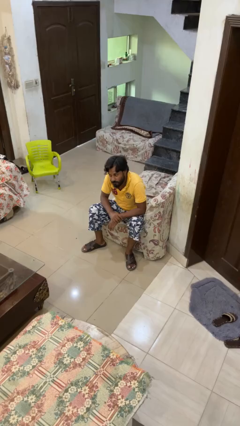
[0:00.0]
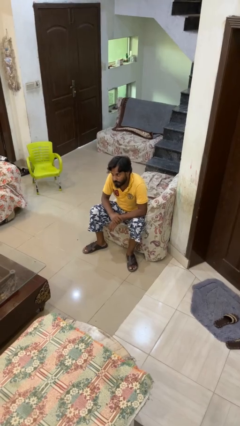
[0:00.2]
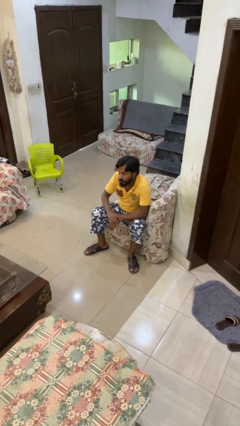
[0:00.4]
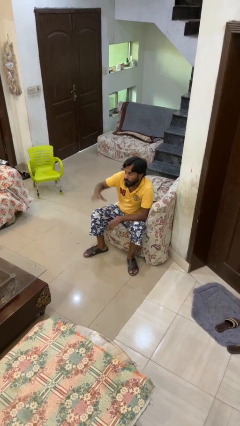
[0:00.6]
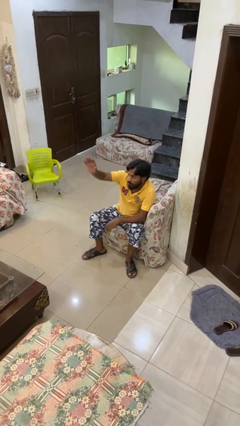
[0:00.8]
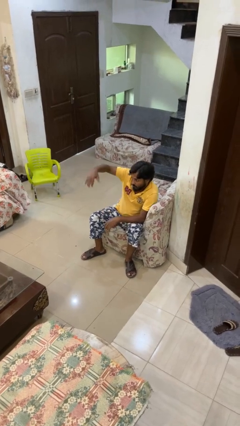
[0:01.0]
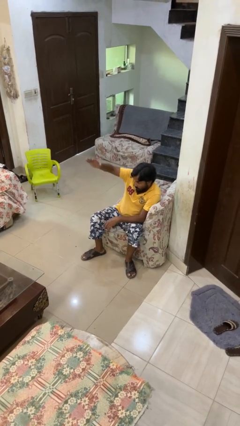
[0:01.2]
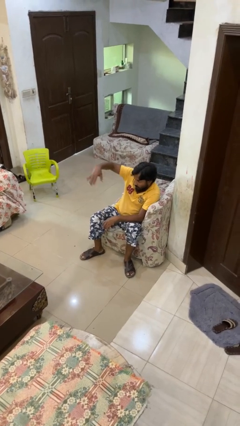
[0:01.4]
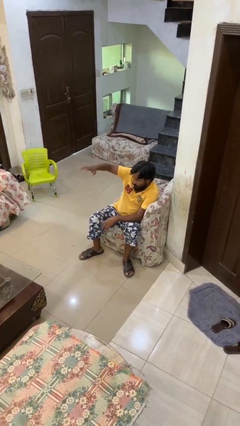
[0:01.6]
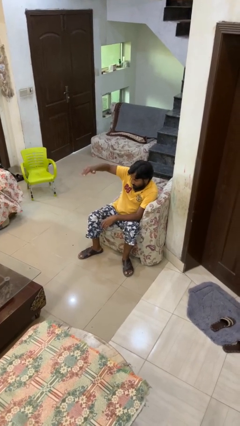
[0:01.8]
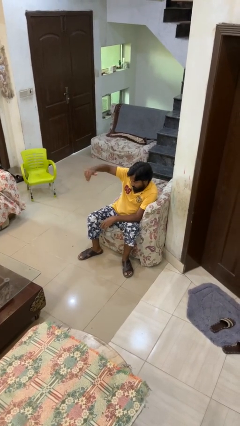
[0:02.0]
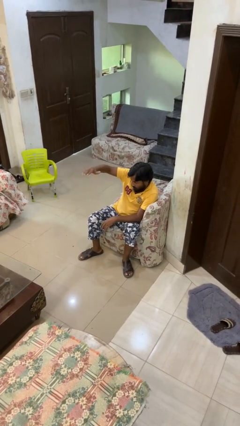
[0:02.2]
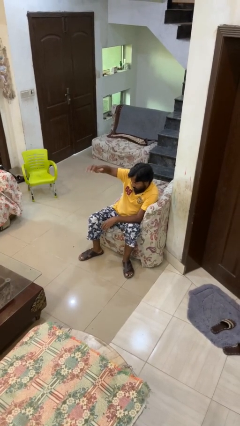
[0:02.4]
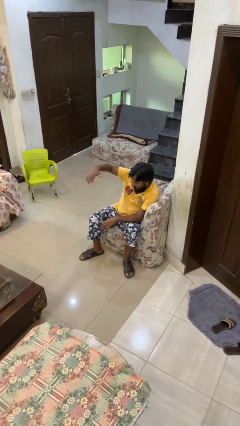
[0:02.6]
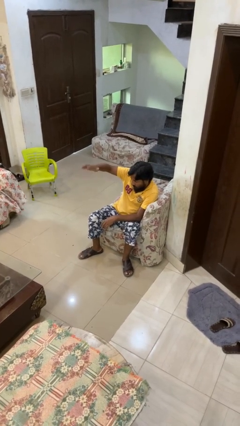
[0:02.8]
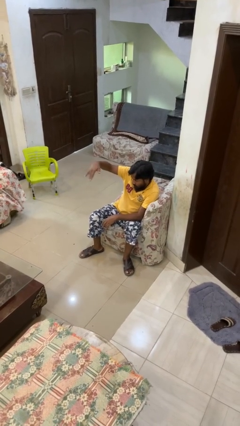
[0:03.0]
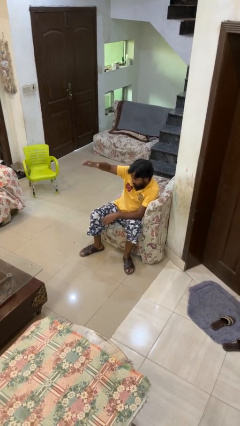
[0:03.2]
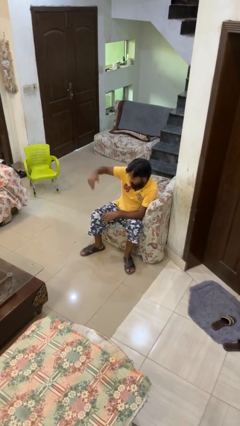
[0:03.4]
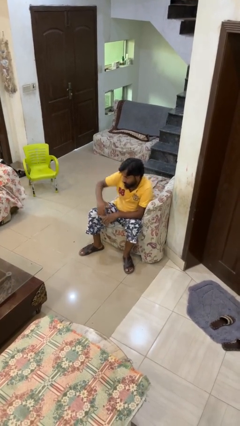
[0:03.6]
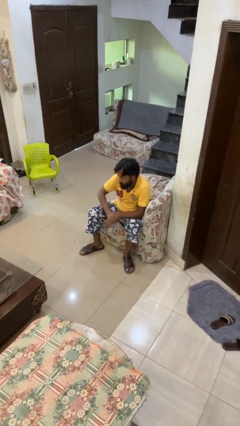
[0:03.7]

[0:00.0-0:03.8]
person gestures come here

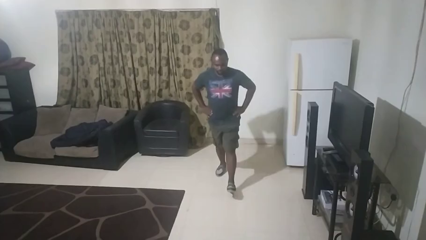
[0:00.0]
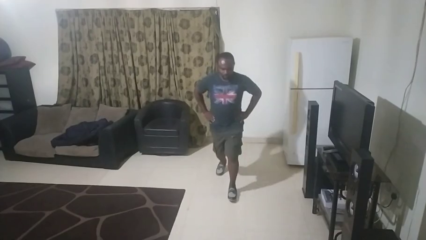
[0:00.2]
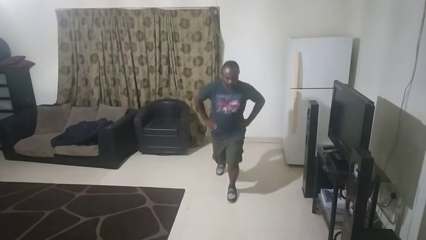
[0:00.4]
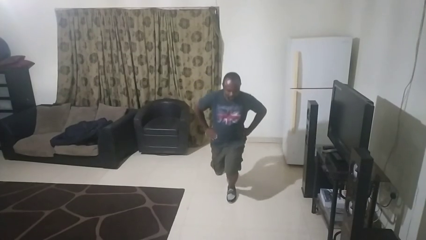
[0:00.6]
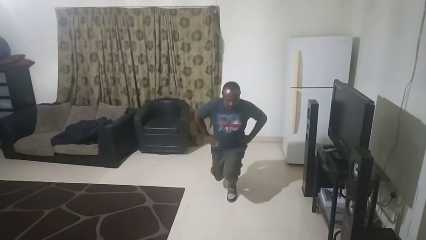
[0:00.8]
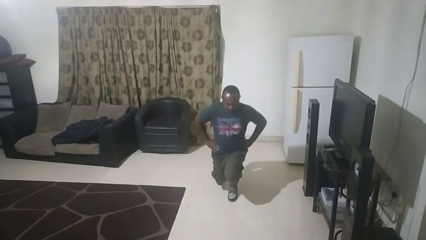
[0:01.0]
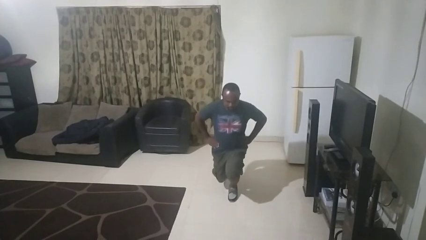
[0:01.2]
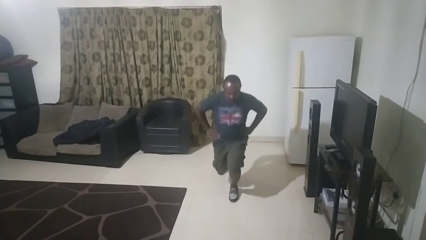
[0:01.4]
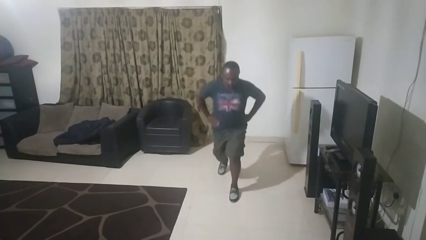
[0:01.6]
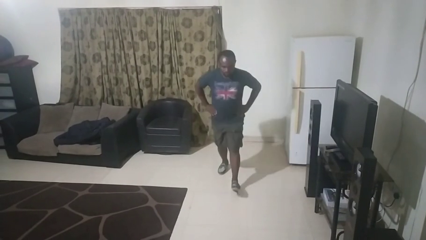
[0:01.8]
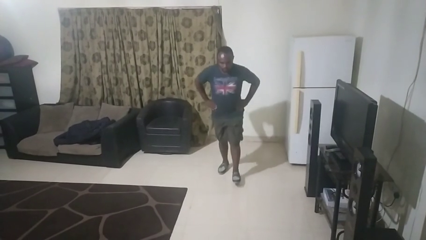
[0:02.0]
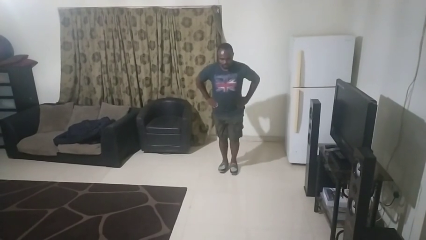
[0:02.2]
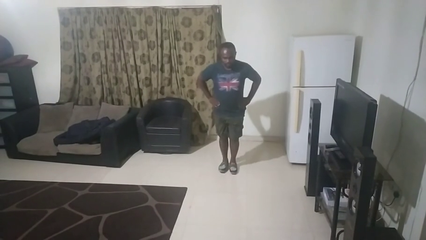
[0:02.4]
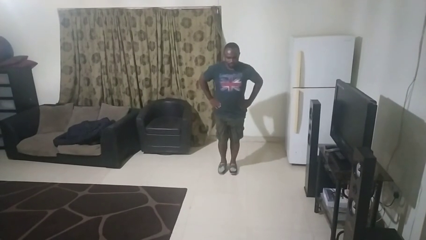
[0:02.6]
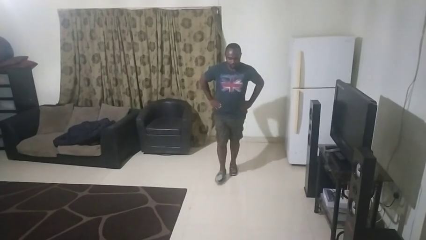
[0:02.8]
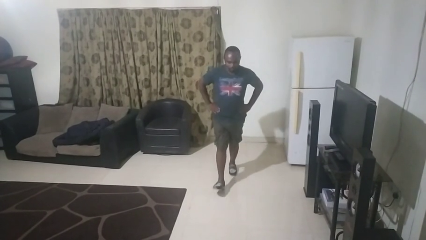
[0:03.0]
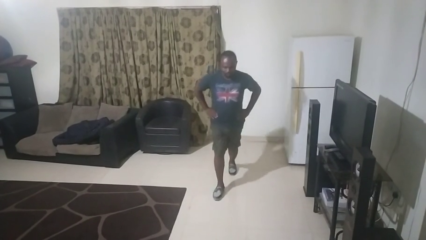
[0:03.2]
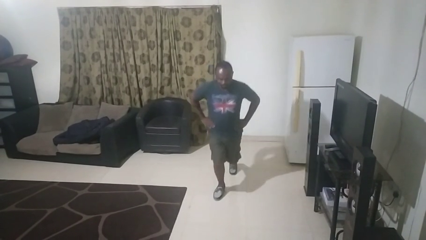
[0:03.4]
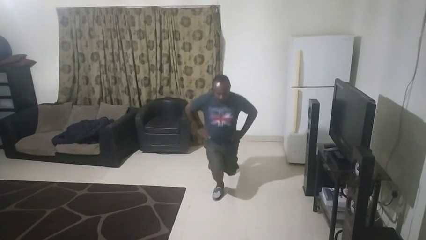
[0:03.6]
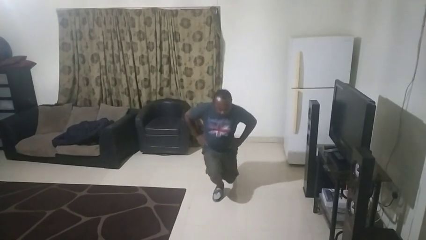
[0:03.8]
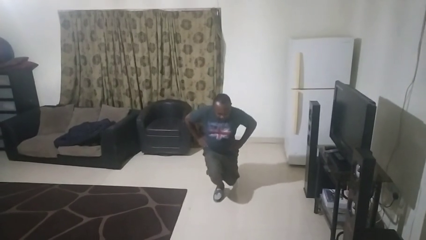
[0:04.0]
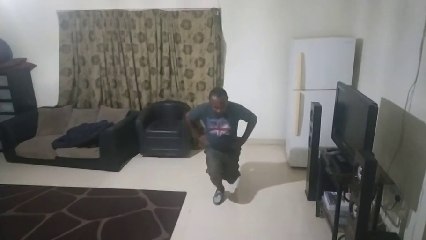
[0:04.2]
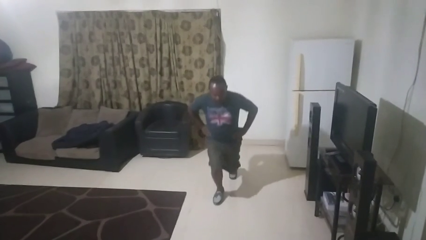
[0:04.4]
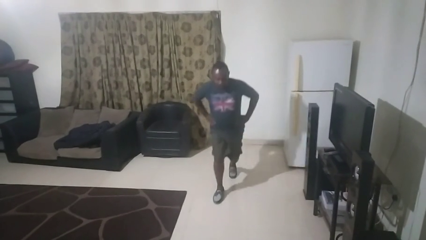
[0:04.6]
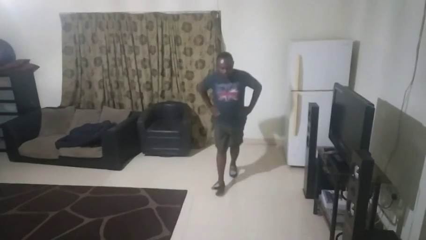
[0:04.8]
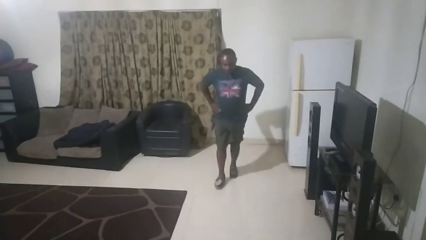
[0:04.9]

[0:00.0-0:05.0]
person exercises with lunges

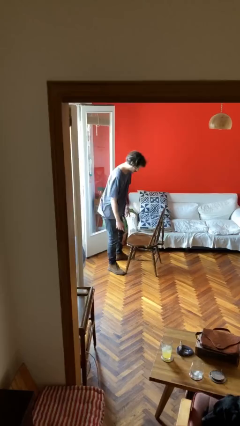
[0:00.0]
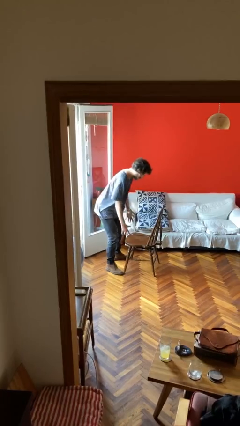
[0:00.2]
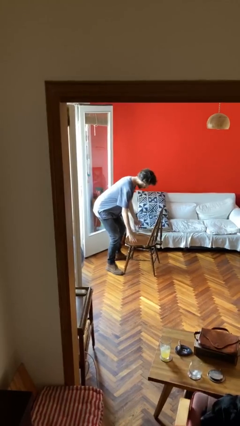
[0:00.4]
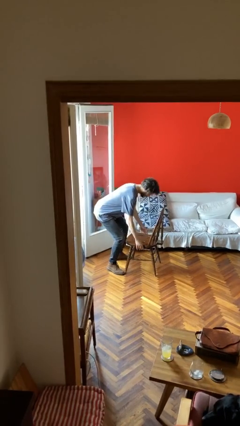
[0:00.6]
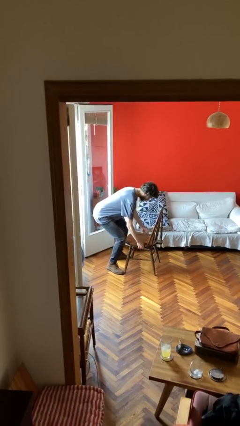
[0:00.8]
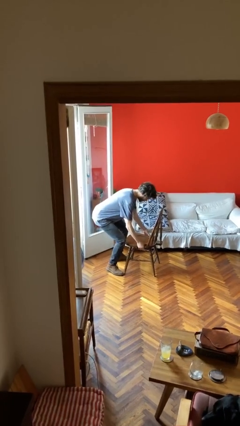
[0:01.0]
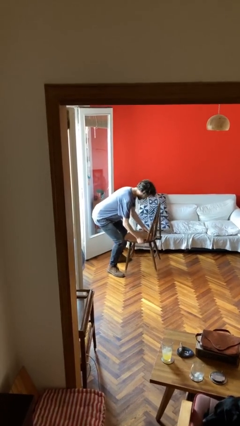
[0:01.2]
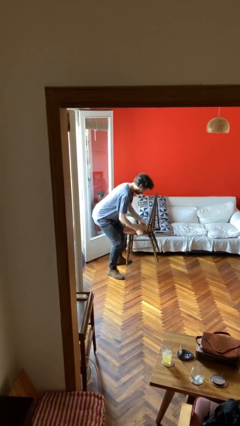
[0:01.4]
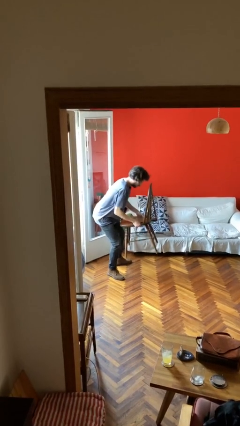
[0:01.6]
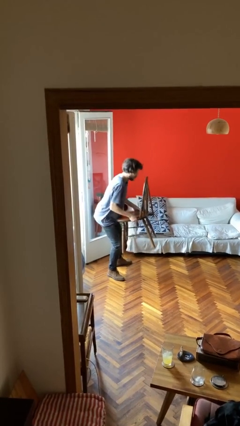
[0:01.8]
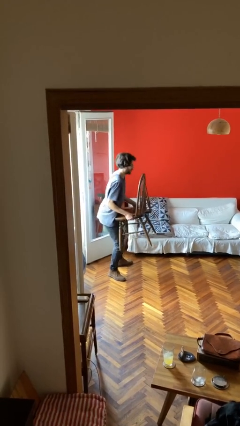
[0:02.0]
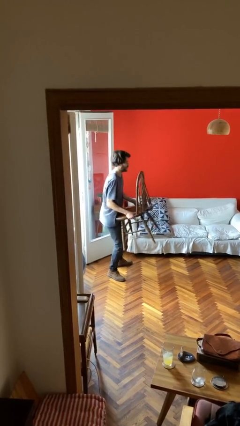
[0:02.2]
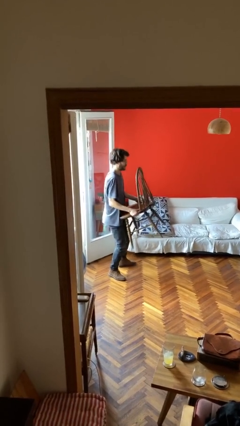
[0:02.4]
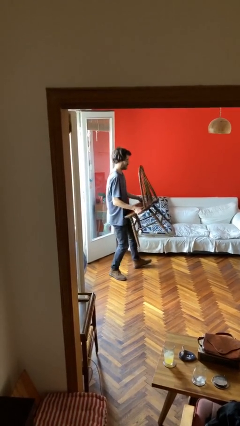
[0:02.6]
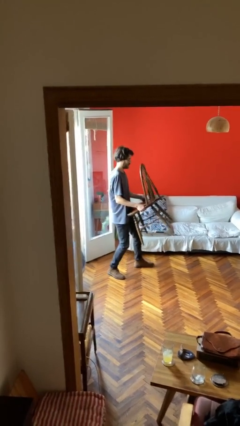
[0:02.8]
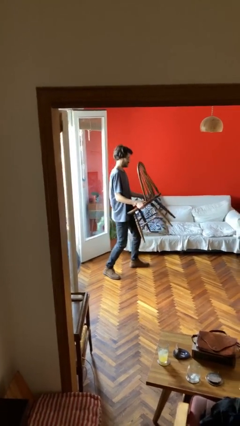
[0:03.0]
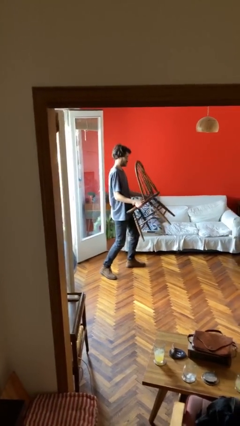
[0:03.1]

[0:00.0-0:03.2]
person picks up object from floor

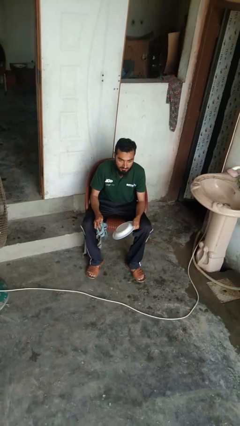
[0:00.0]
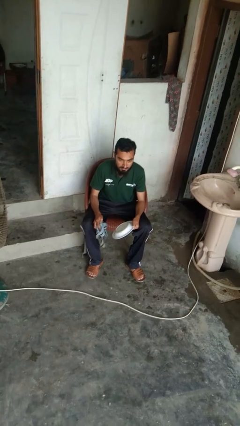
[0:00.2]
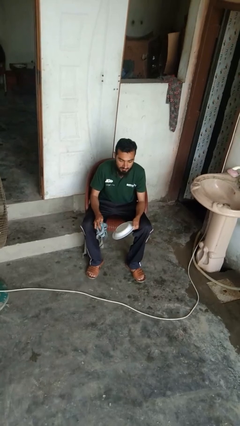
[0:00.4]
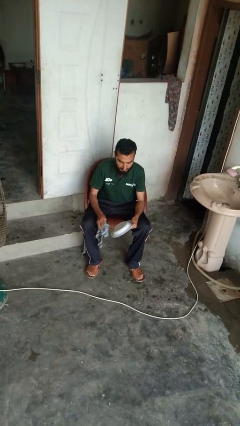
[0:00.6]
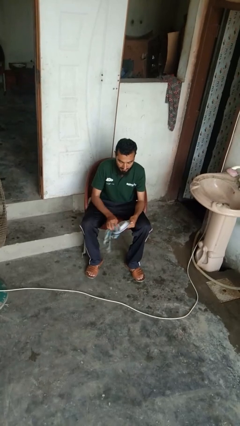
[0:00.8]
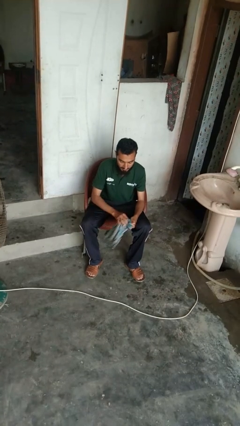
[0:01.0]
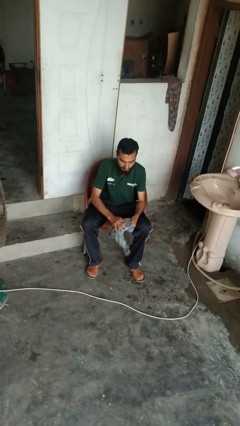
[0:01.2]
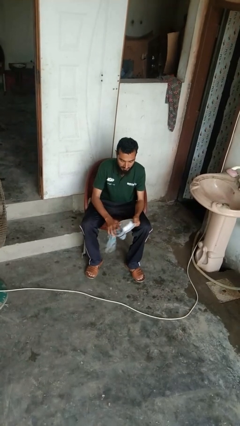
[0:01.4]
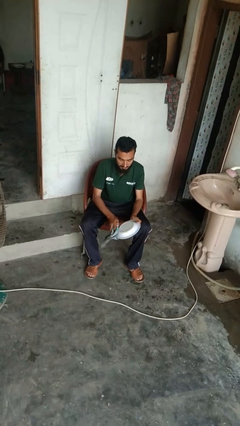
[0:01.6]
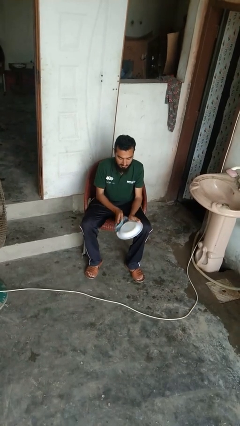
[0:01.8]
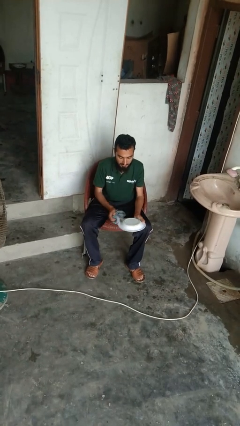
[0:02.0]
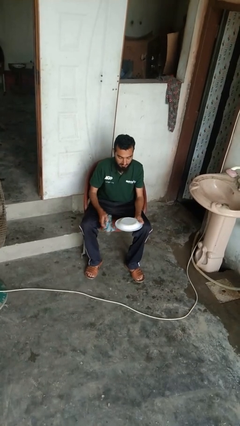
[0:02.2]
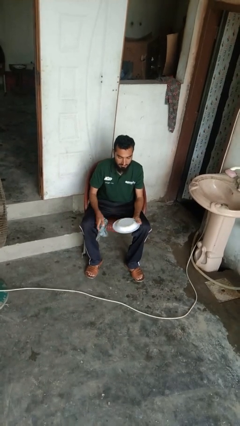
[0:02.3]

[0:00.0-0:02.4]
person dries dish

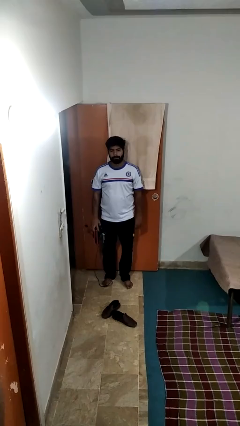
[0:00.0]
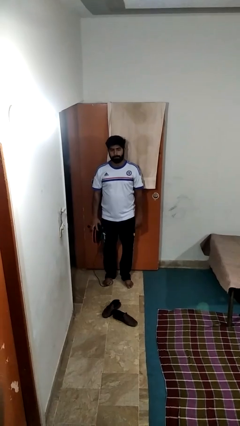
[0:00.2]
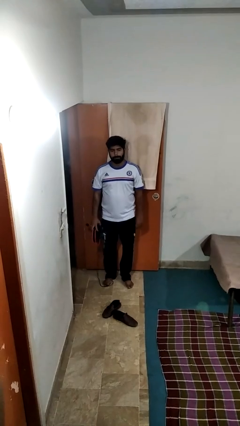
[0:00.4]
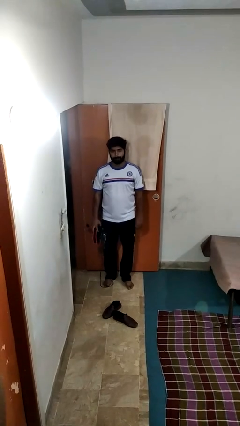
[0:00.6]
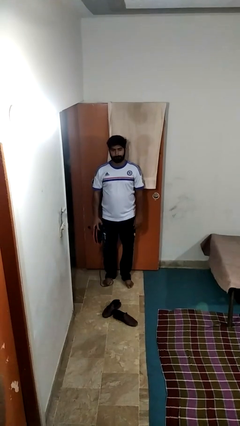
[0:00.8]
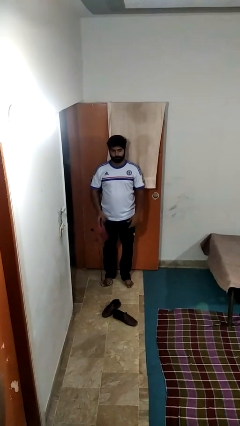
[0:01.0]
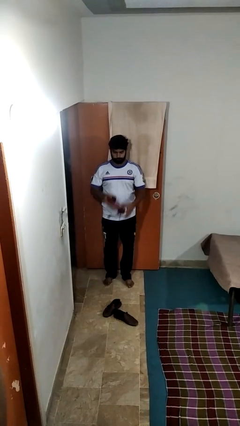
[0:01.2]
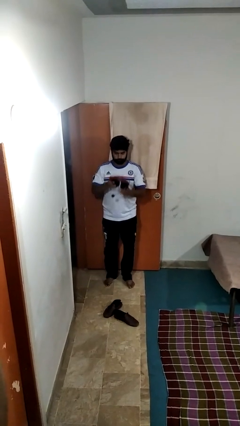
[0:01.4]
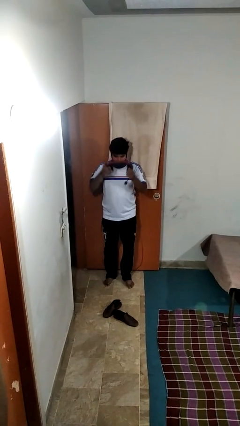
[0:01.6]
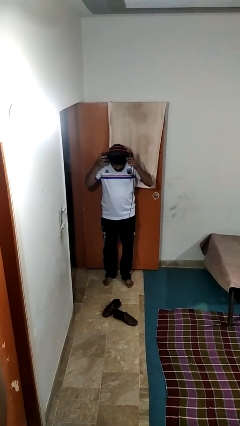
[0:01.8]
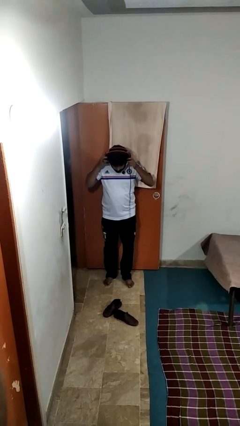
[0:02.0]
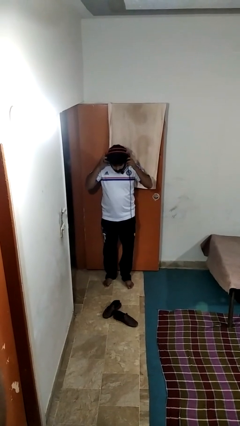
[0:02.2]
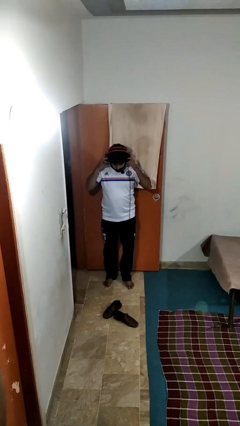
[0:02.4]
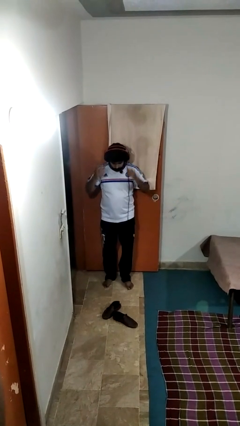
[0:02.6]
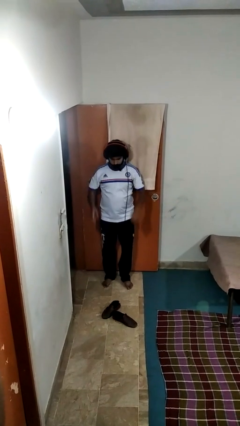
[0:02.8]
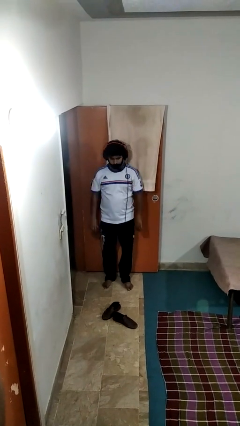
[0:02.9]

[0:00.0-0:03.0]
person puts on headphones

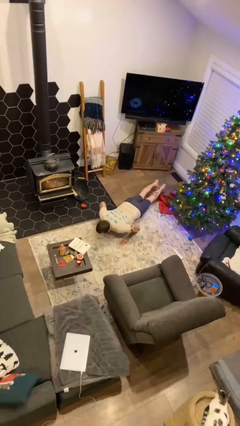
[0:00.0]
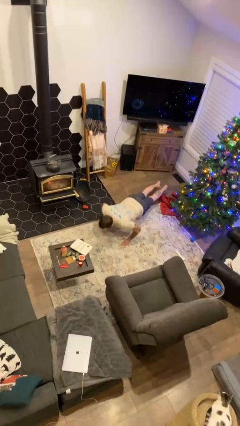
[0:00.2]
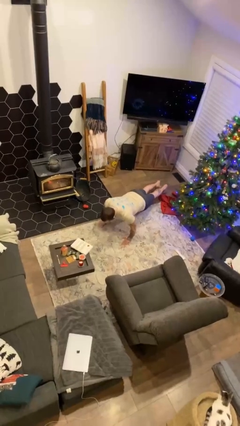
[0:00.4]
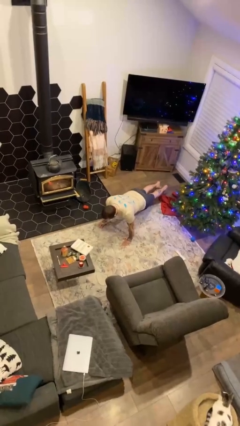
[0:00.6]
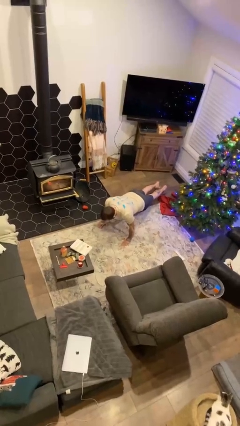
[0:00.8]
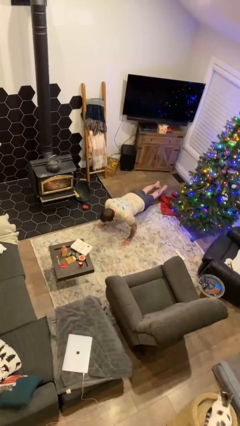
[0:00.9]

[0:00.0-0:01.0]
person exercises with pushup
